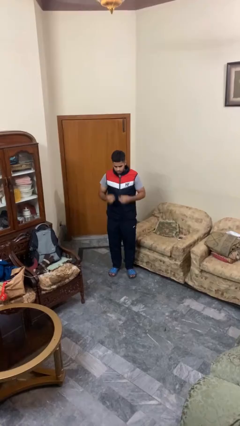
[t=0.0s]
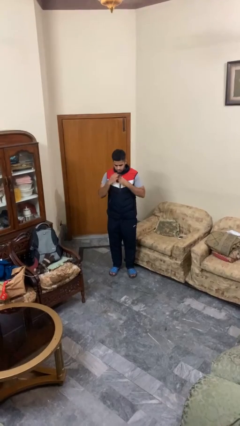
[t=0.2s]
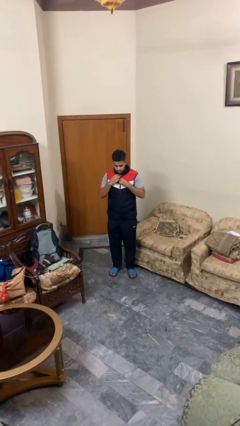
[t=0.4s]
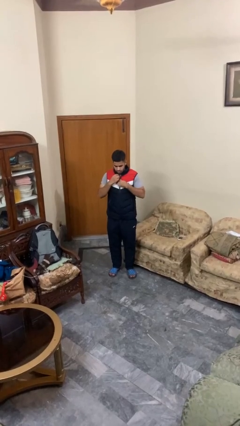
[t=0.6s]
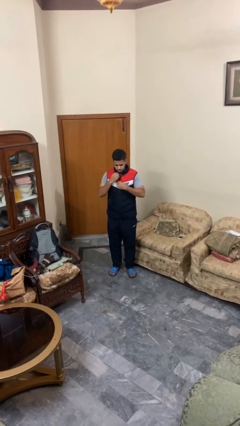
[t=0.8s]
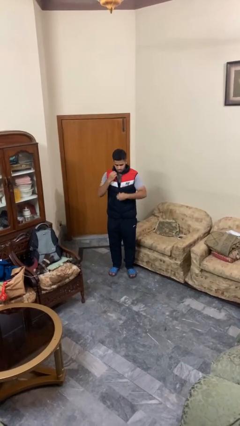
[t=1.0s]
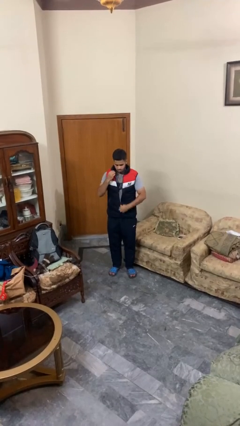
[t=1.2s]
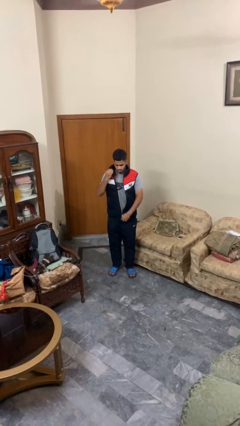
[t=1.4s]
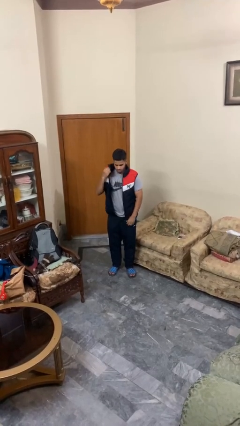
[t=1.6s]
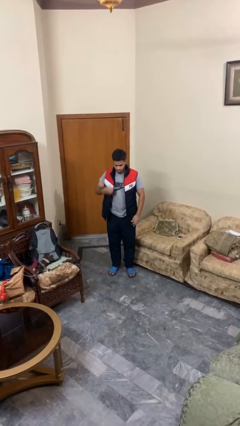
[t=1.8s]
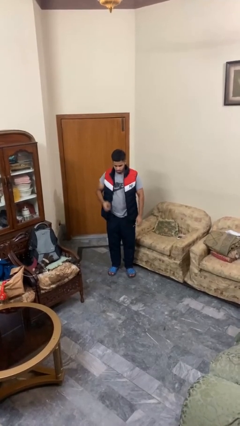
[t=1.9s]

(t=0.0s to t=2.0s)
person unzips jacket

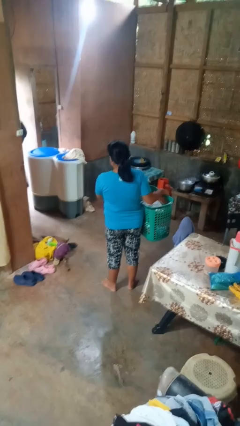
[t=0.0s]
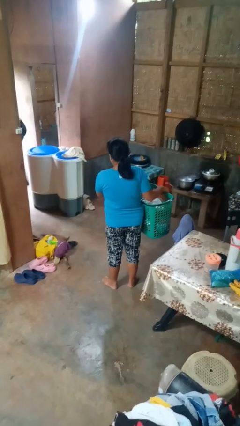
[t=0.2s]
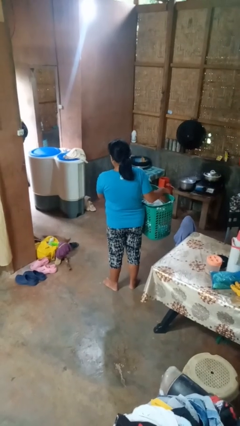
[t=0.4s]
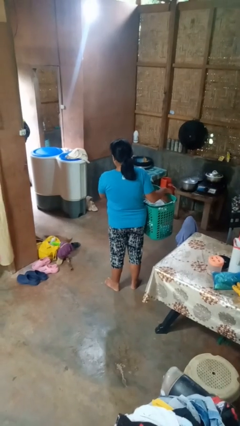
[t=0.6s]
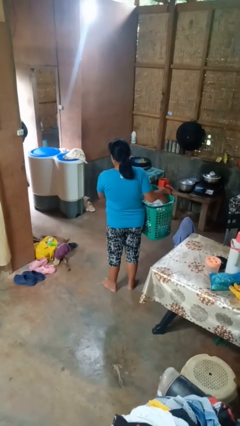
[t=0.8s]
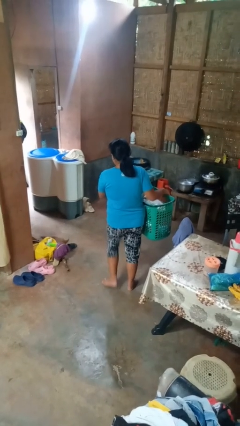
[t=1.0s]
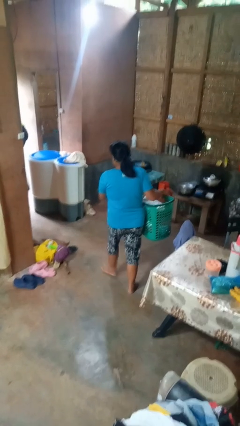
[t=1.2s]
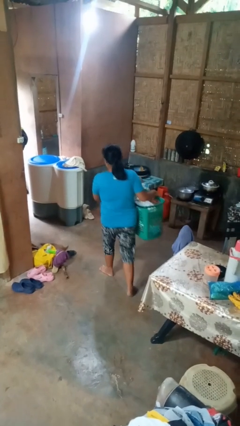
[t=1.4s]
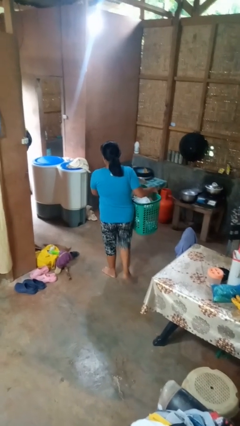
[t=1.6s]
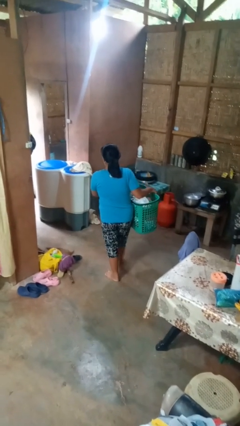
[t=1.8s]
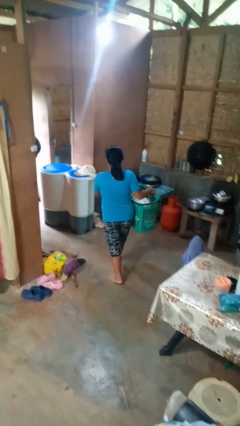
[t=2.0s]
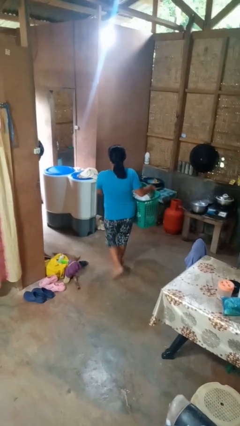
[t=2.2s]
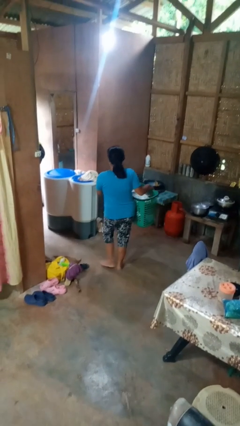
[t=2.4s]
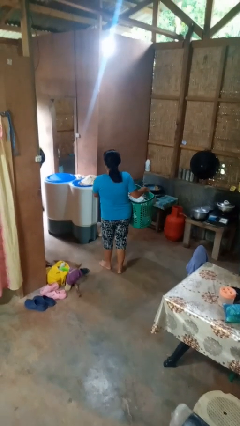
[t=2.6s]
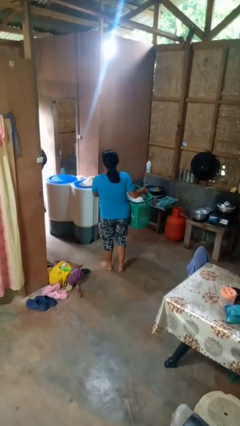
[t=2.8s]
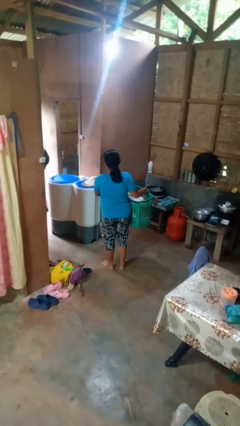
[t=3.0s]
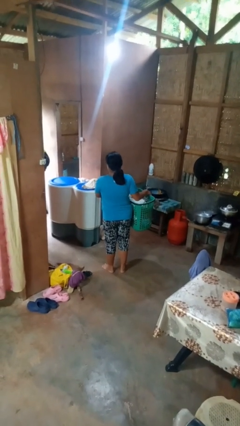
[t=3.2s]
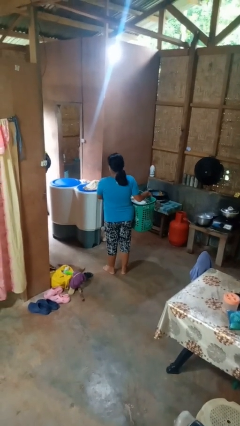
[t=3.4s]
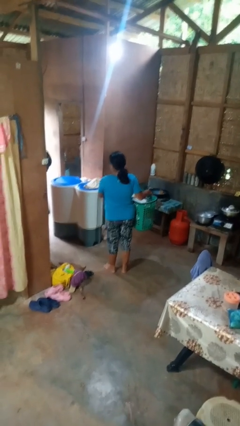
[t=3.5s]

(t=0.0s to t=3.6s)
person carries laundry basket

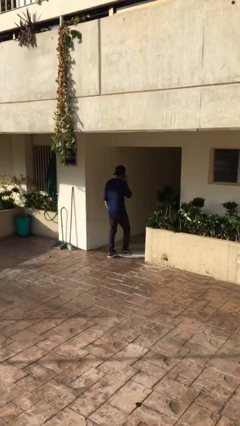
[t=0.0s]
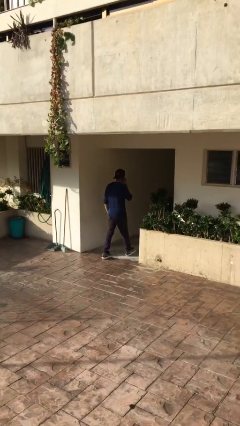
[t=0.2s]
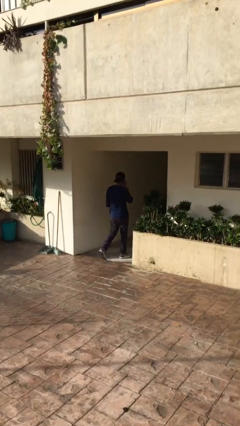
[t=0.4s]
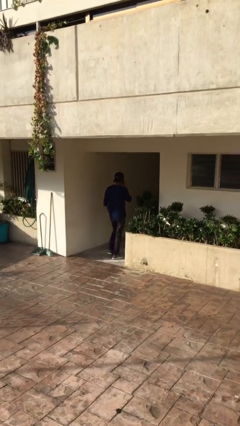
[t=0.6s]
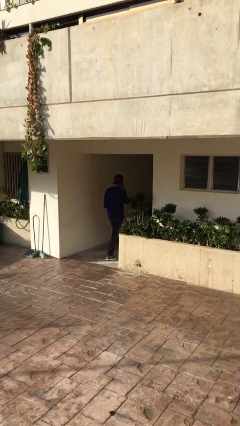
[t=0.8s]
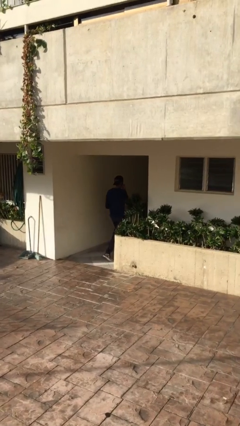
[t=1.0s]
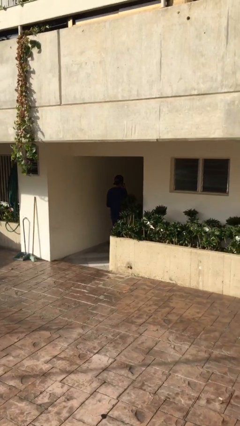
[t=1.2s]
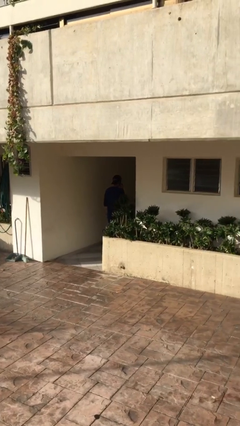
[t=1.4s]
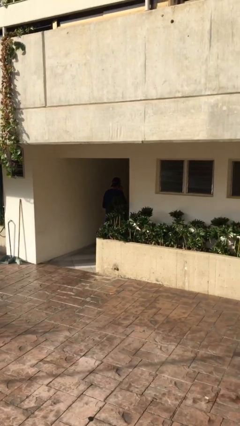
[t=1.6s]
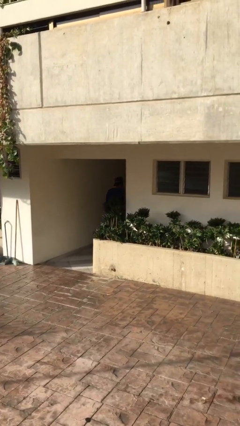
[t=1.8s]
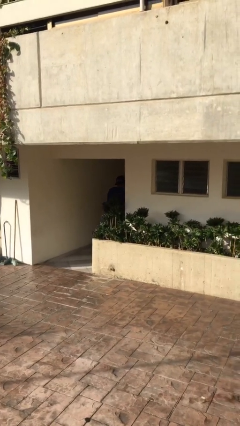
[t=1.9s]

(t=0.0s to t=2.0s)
person exits scene through structure

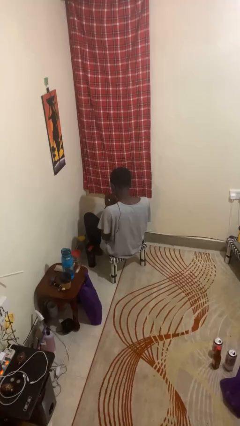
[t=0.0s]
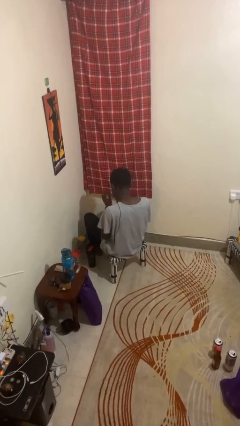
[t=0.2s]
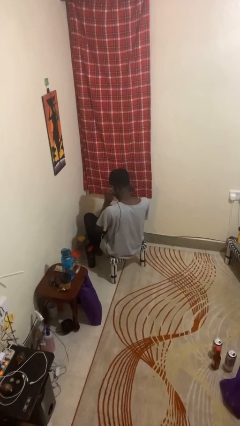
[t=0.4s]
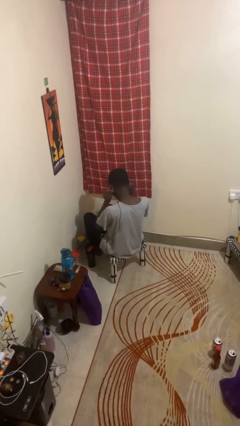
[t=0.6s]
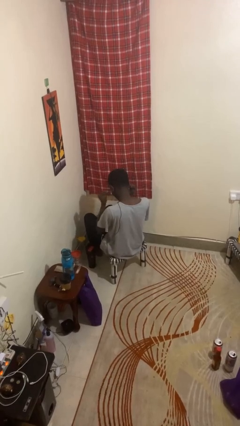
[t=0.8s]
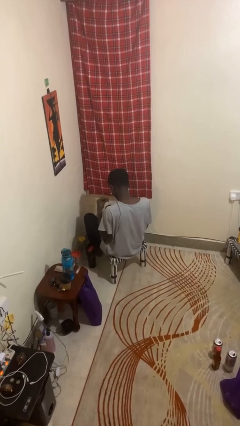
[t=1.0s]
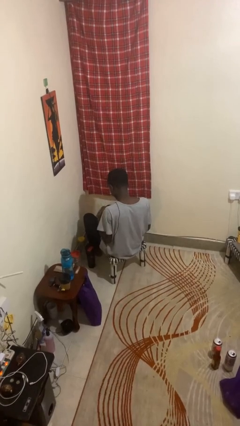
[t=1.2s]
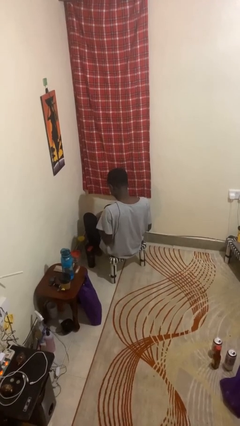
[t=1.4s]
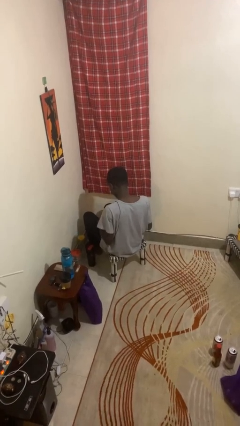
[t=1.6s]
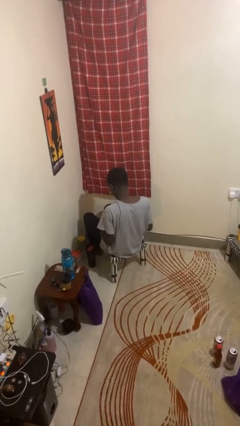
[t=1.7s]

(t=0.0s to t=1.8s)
person takes off headphones

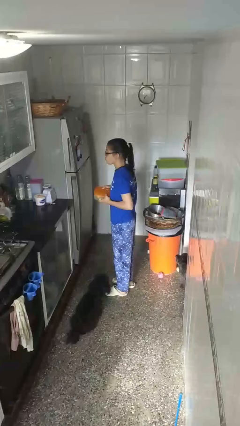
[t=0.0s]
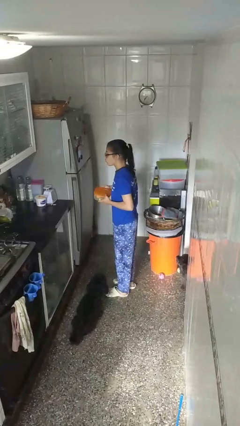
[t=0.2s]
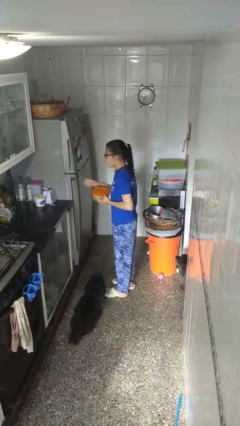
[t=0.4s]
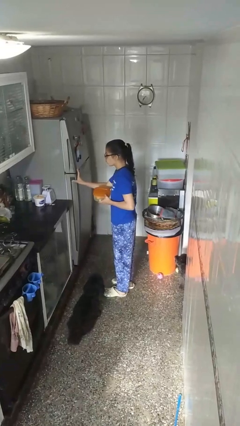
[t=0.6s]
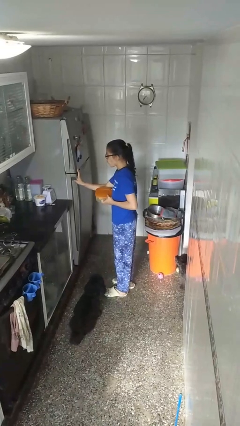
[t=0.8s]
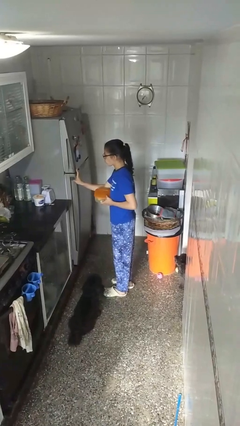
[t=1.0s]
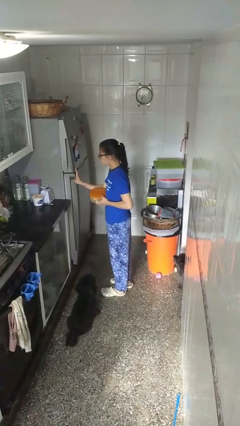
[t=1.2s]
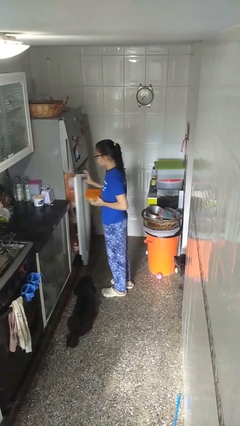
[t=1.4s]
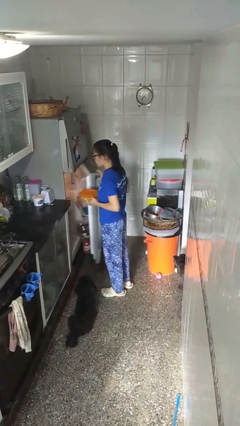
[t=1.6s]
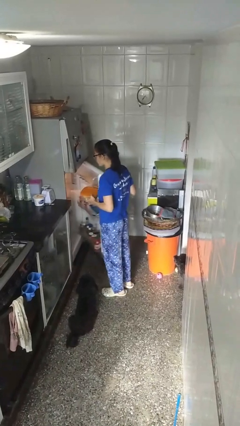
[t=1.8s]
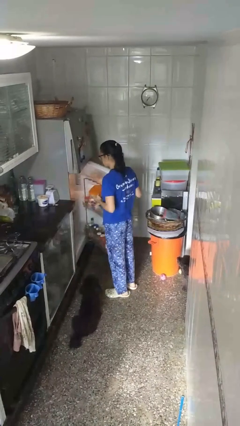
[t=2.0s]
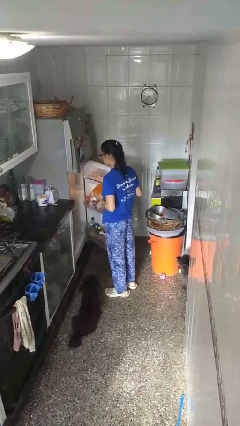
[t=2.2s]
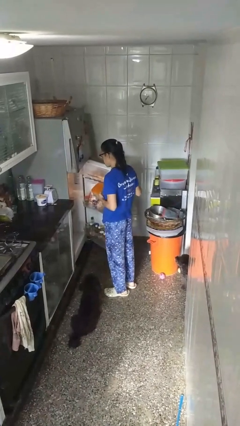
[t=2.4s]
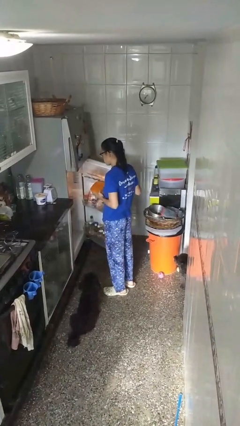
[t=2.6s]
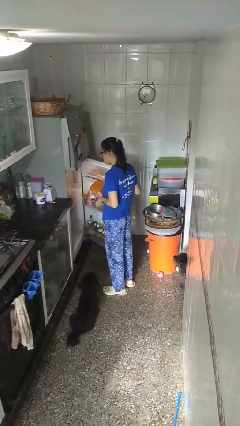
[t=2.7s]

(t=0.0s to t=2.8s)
person opens refrigerator

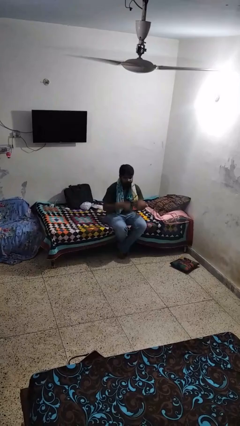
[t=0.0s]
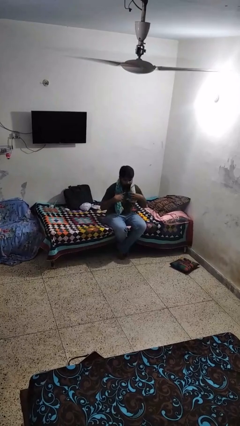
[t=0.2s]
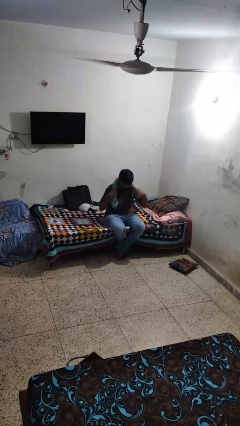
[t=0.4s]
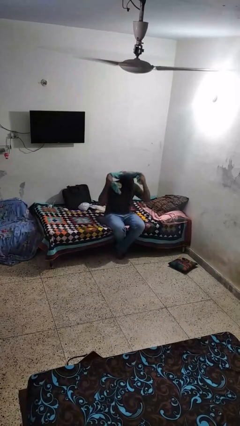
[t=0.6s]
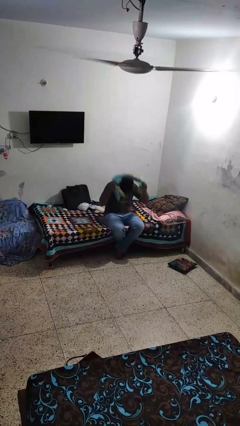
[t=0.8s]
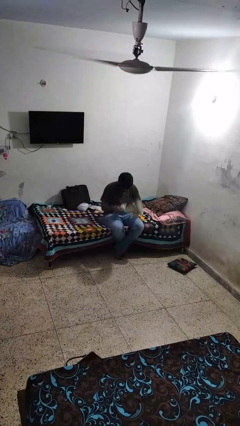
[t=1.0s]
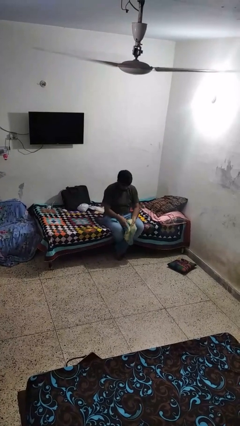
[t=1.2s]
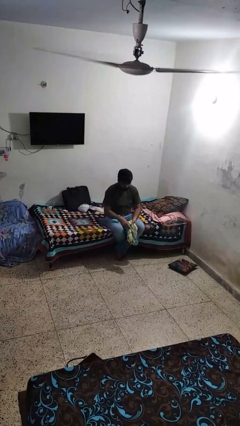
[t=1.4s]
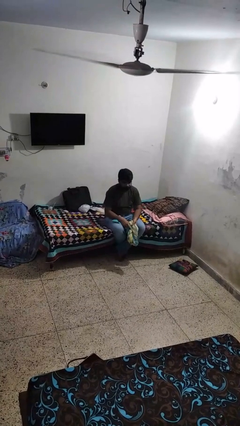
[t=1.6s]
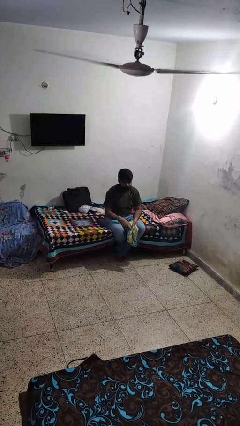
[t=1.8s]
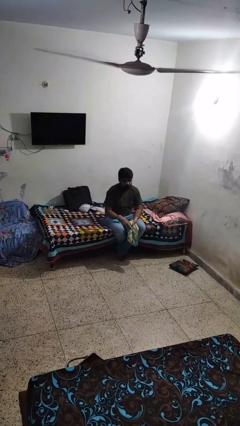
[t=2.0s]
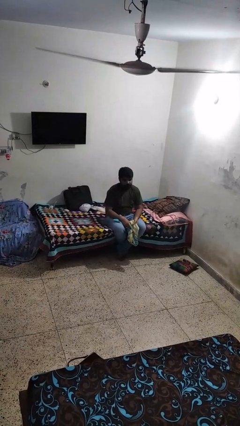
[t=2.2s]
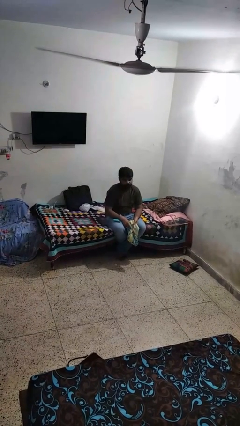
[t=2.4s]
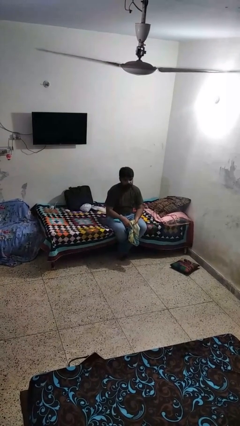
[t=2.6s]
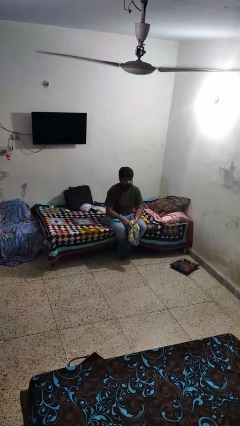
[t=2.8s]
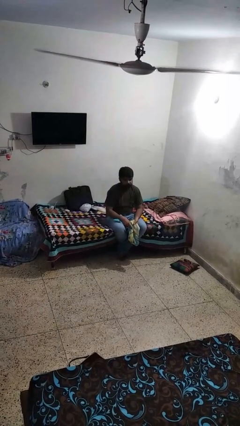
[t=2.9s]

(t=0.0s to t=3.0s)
person takes off scarf

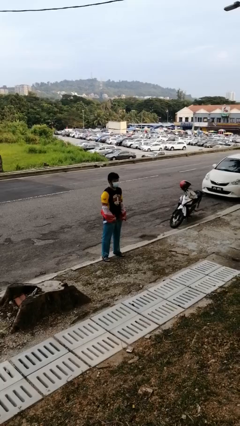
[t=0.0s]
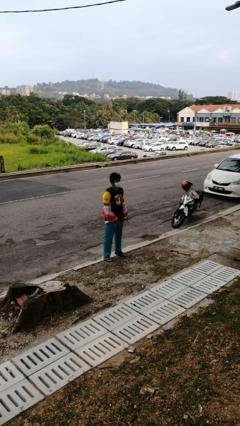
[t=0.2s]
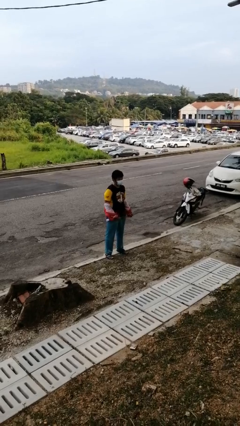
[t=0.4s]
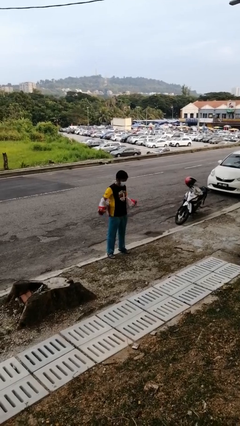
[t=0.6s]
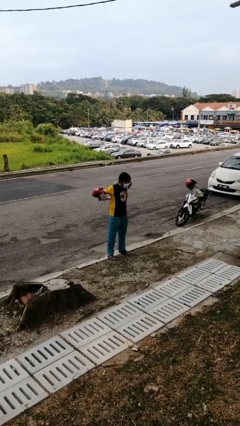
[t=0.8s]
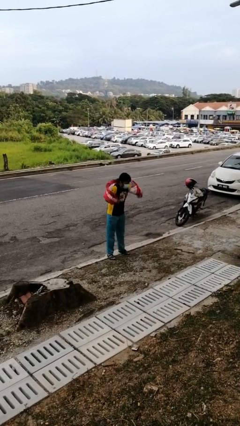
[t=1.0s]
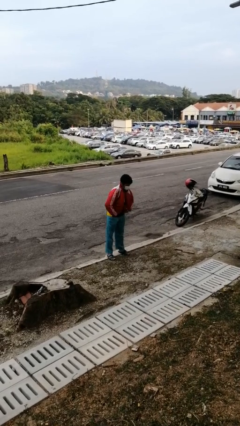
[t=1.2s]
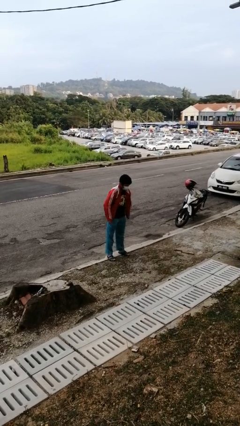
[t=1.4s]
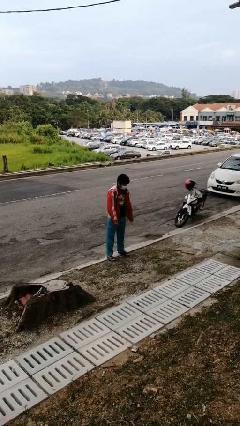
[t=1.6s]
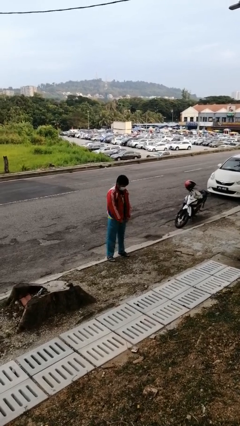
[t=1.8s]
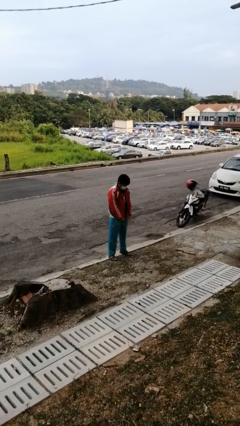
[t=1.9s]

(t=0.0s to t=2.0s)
person puts on jacket

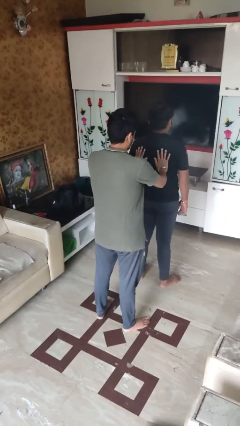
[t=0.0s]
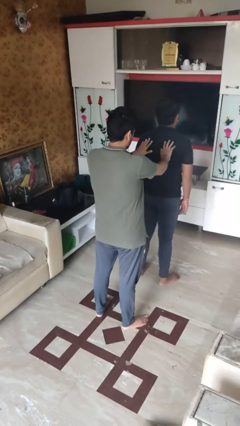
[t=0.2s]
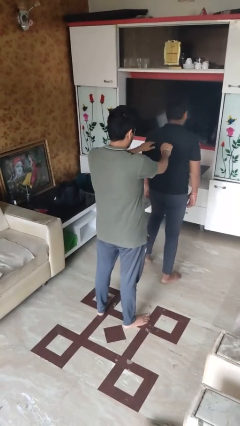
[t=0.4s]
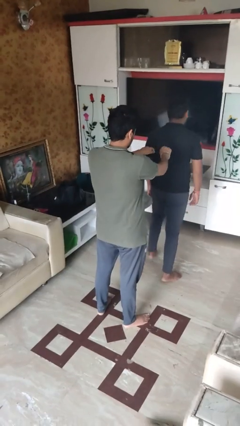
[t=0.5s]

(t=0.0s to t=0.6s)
person shoves person
